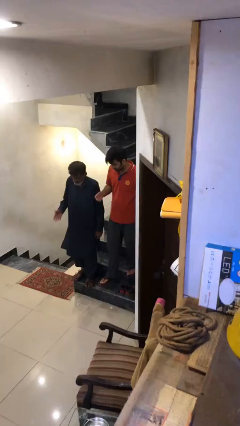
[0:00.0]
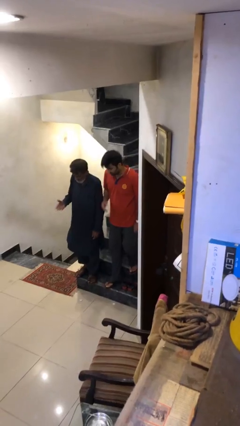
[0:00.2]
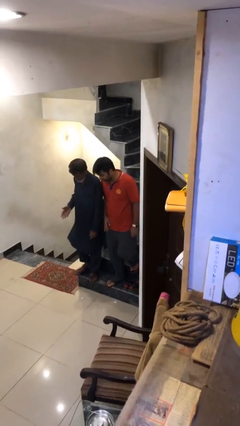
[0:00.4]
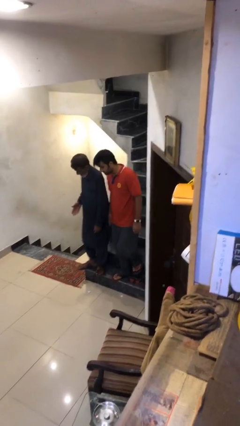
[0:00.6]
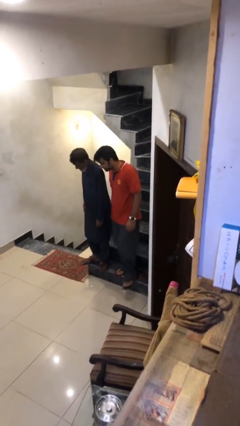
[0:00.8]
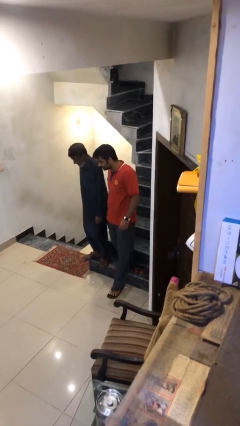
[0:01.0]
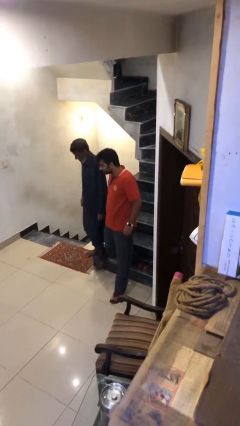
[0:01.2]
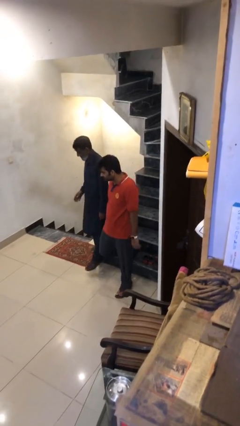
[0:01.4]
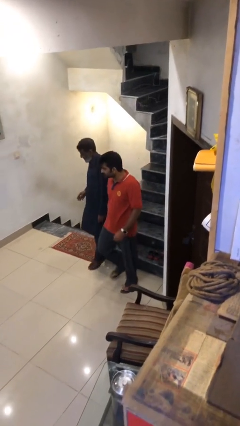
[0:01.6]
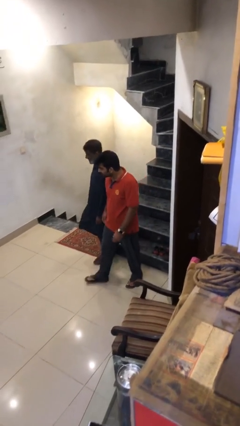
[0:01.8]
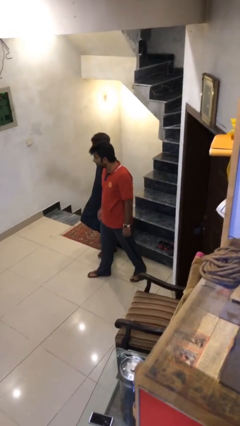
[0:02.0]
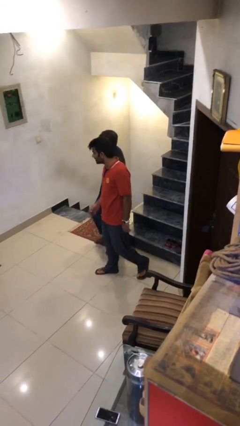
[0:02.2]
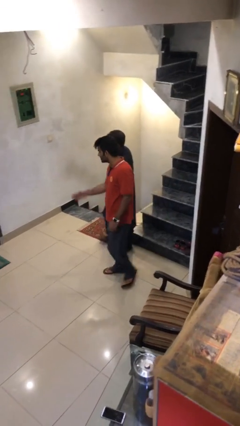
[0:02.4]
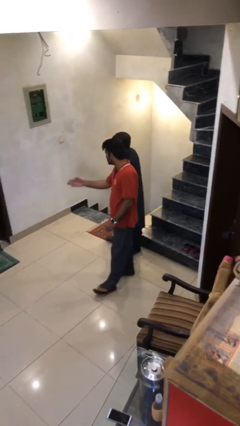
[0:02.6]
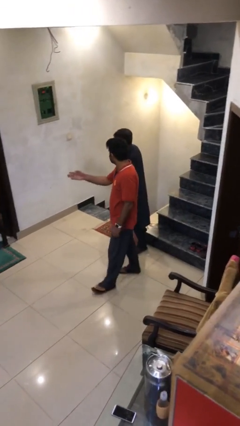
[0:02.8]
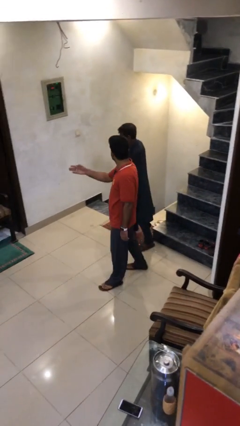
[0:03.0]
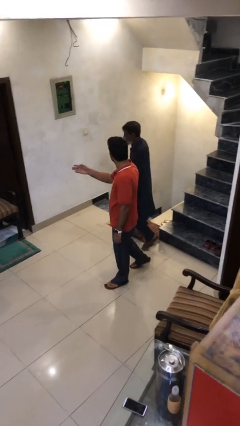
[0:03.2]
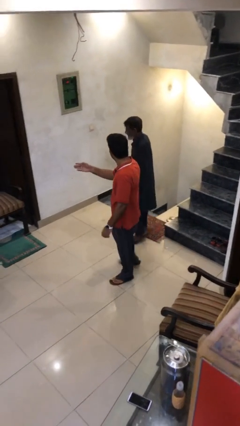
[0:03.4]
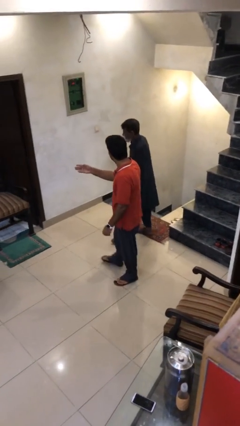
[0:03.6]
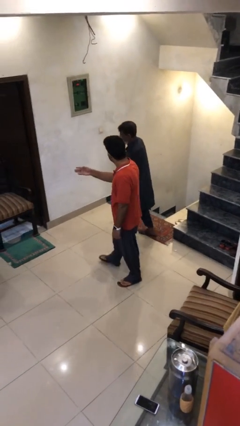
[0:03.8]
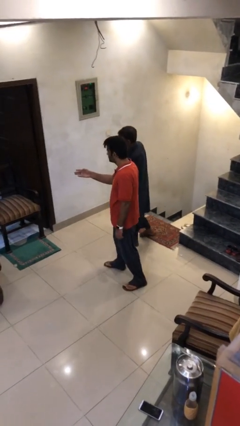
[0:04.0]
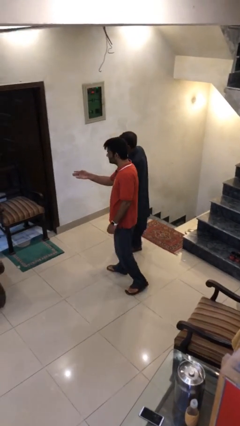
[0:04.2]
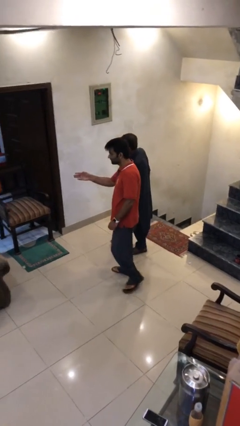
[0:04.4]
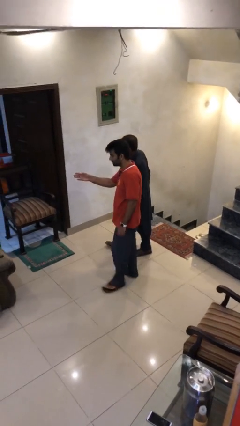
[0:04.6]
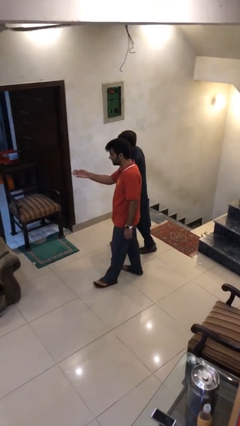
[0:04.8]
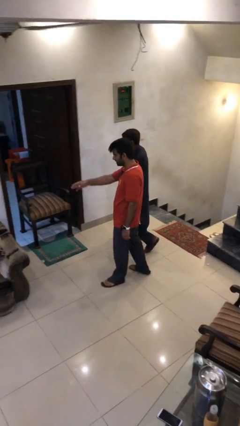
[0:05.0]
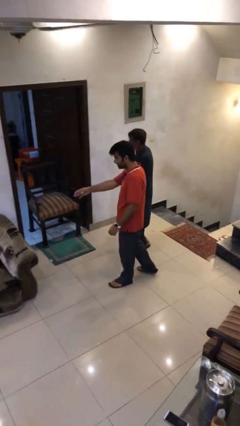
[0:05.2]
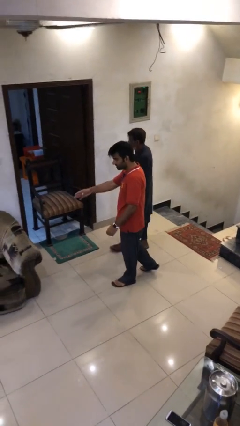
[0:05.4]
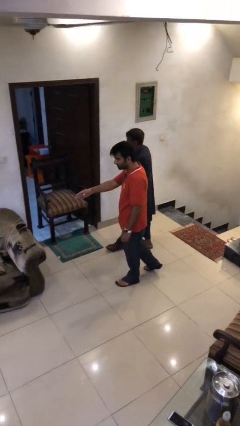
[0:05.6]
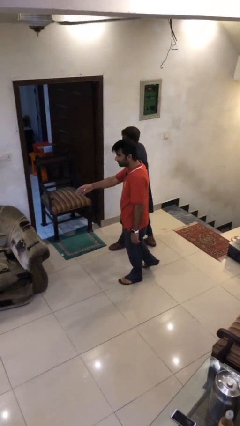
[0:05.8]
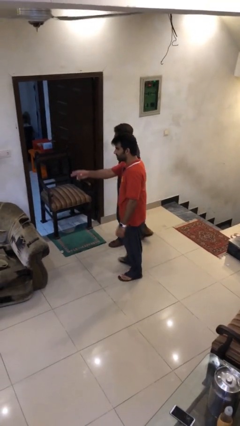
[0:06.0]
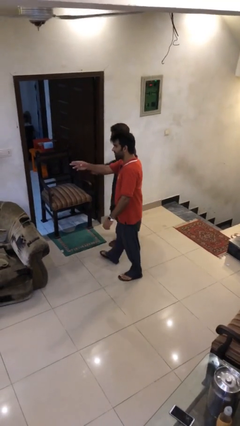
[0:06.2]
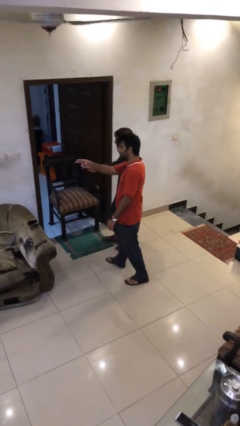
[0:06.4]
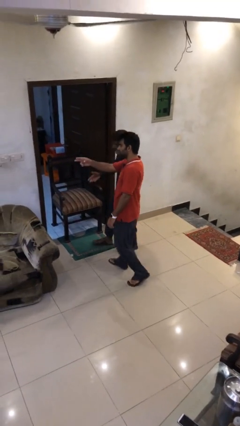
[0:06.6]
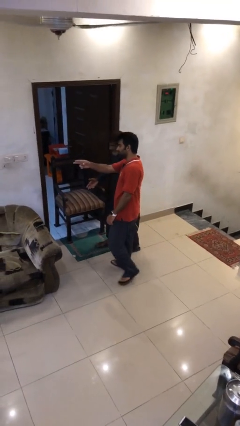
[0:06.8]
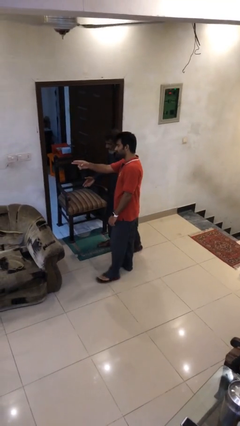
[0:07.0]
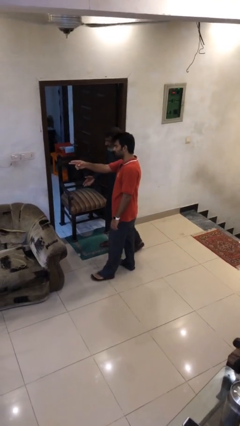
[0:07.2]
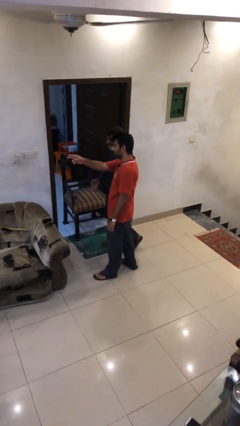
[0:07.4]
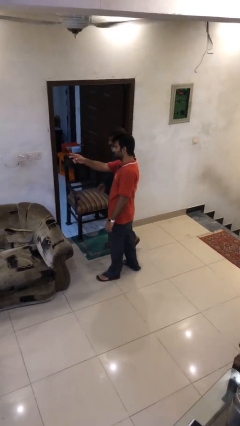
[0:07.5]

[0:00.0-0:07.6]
person talks to person

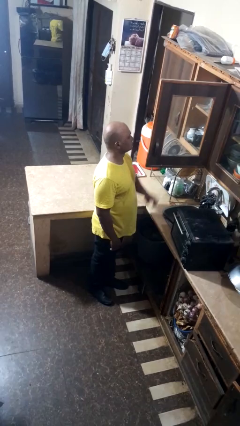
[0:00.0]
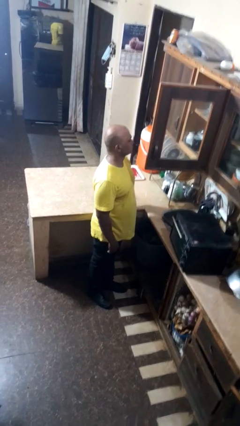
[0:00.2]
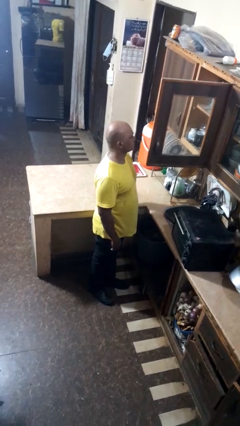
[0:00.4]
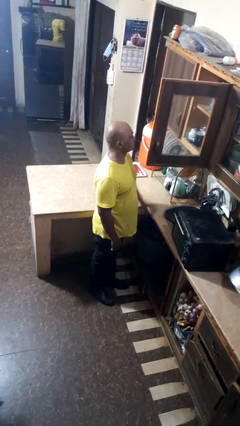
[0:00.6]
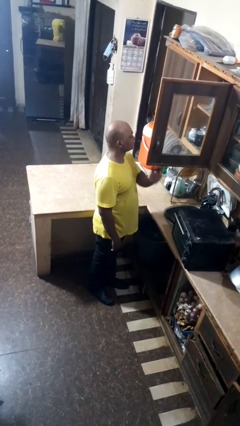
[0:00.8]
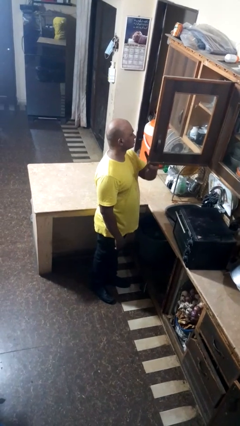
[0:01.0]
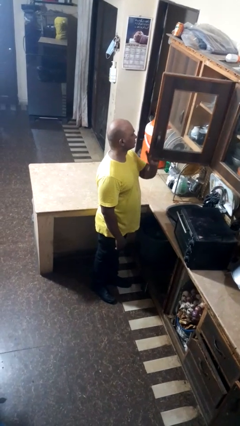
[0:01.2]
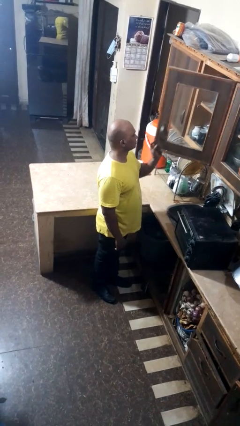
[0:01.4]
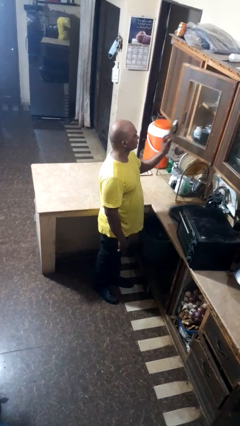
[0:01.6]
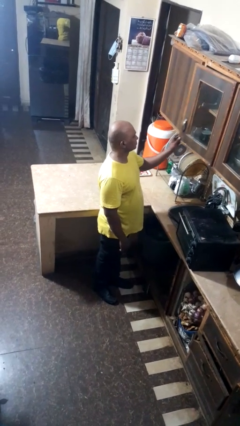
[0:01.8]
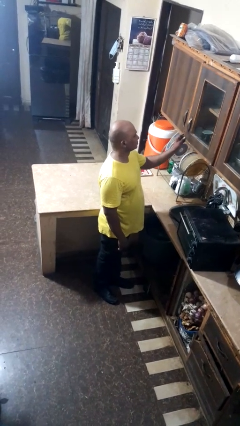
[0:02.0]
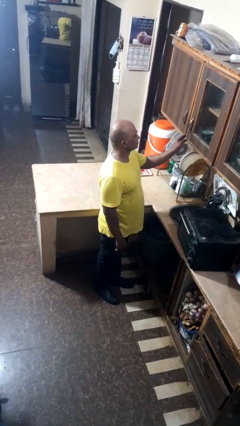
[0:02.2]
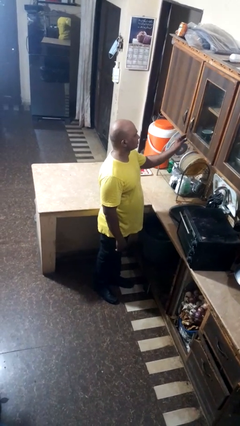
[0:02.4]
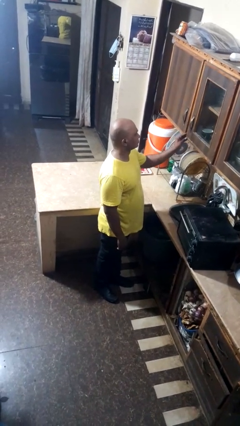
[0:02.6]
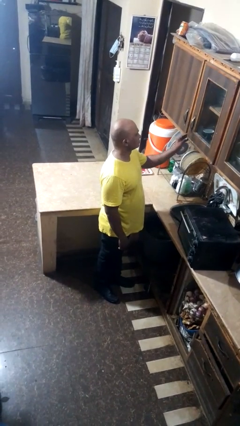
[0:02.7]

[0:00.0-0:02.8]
person closes cabinet

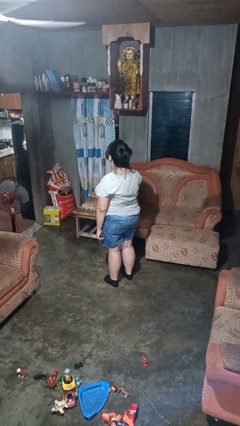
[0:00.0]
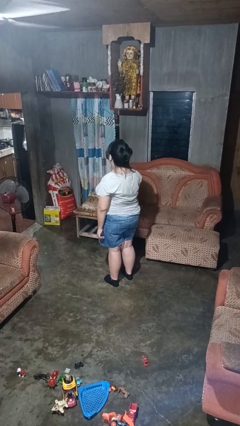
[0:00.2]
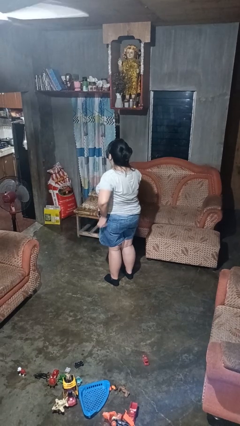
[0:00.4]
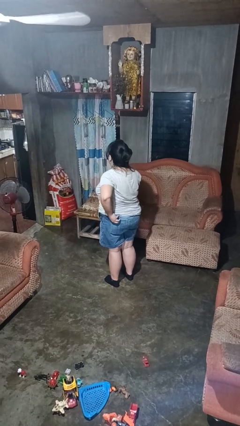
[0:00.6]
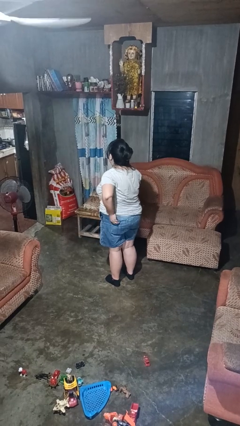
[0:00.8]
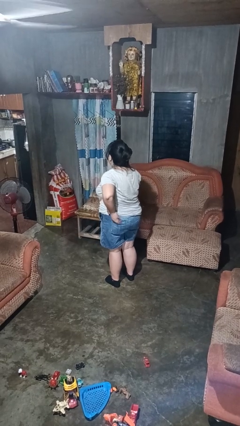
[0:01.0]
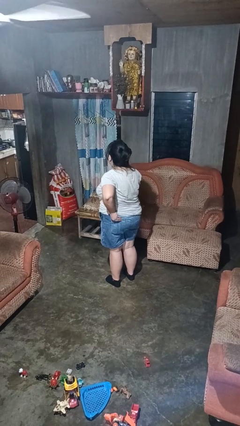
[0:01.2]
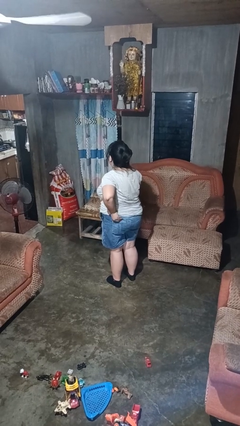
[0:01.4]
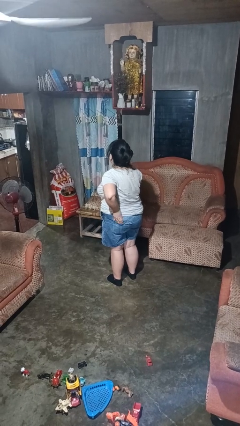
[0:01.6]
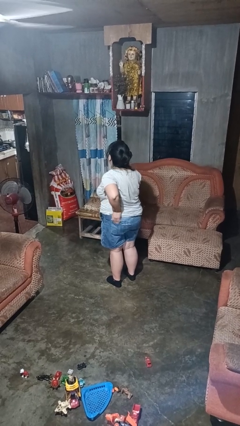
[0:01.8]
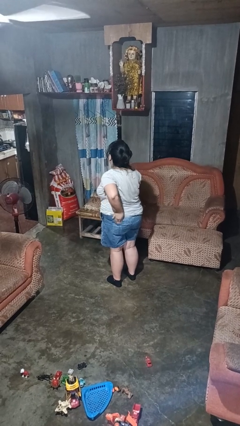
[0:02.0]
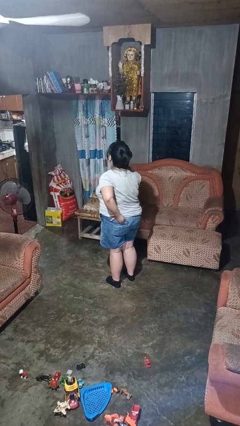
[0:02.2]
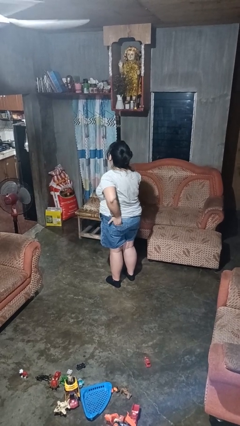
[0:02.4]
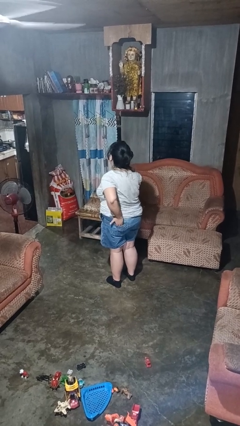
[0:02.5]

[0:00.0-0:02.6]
person puts hands in back pockets

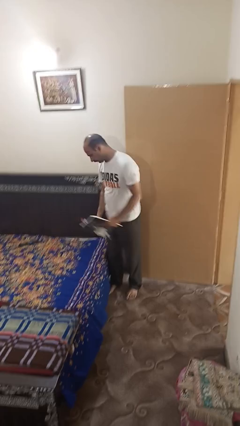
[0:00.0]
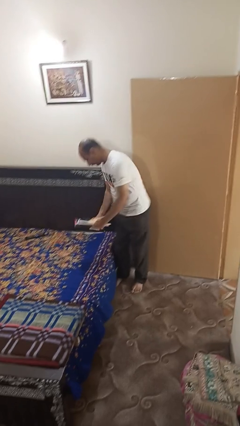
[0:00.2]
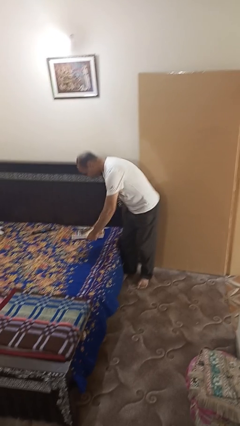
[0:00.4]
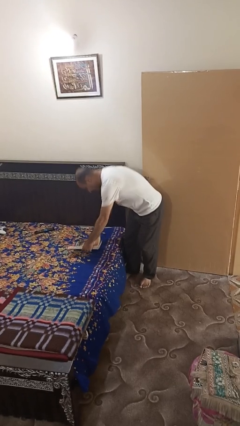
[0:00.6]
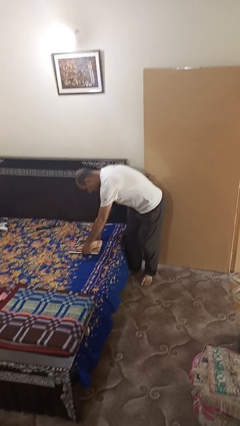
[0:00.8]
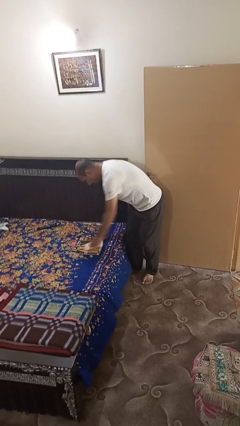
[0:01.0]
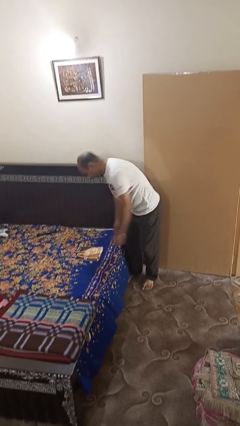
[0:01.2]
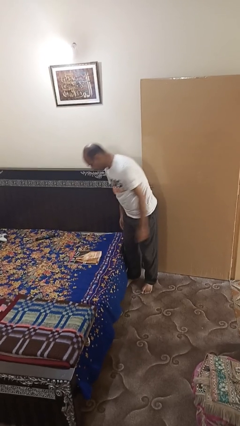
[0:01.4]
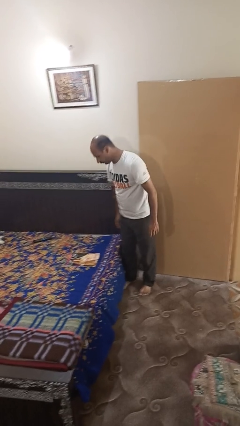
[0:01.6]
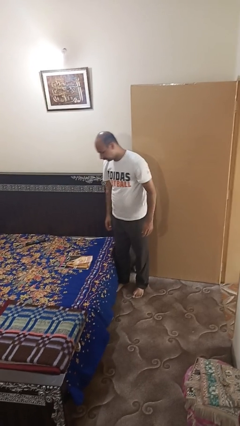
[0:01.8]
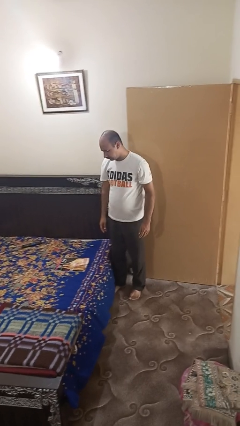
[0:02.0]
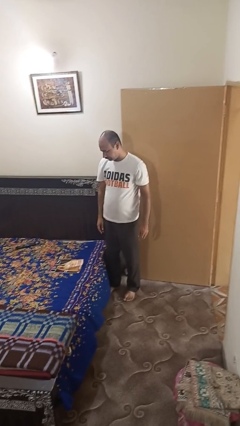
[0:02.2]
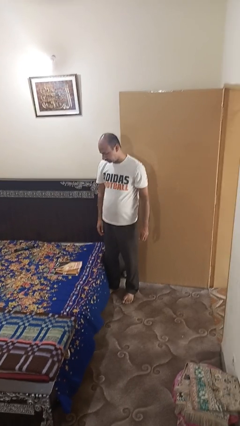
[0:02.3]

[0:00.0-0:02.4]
person puts down object on bed

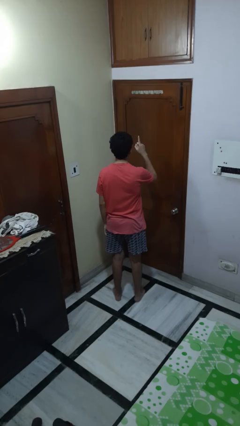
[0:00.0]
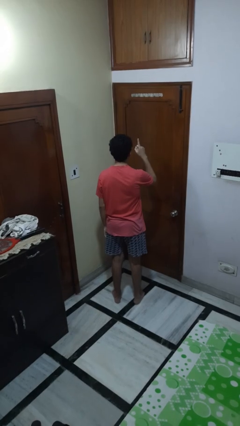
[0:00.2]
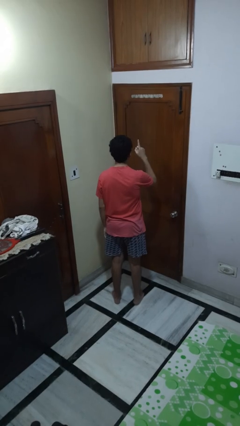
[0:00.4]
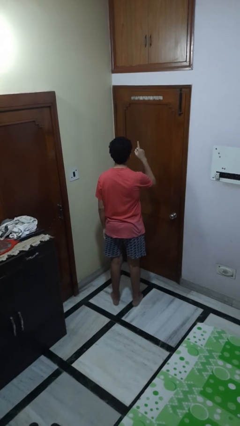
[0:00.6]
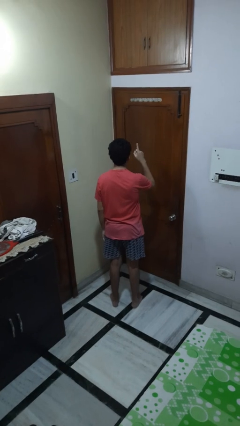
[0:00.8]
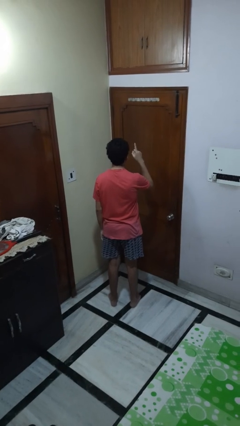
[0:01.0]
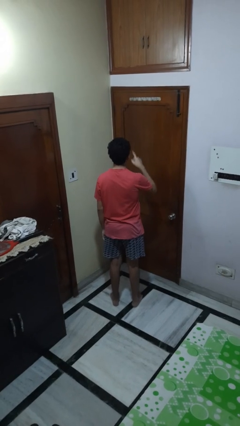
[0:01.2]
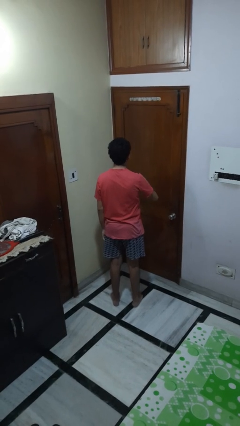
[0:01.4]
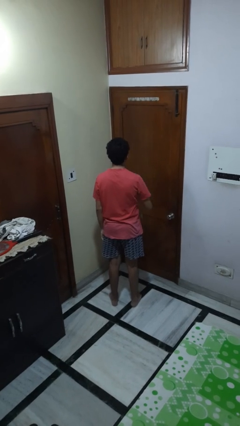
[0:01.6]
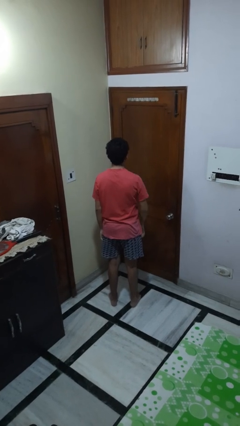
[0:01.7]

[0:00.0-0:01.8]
person gestures number one

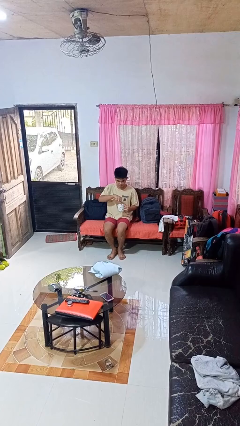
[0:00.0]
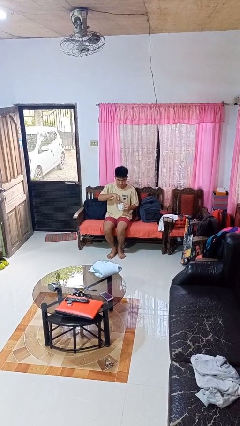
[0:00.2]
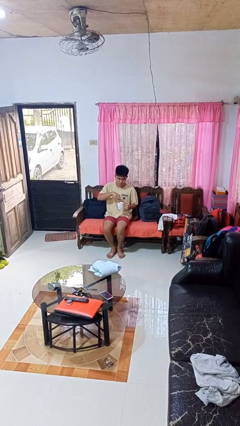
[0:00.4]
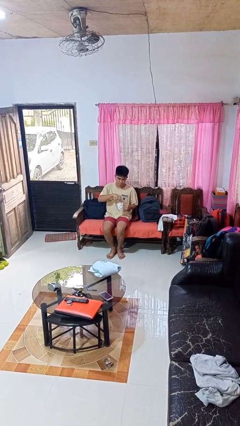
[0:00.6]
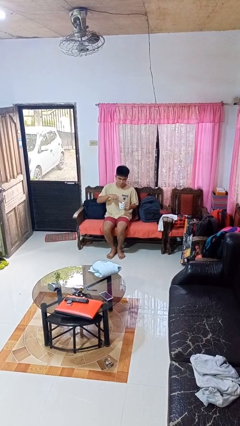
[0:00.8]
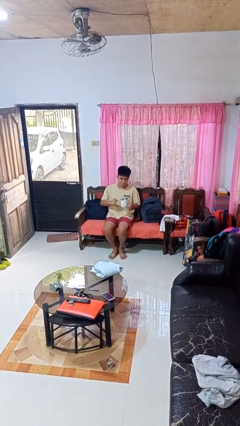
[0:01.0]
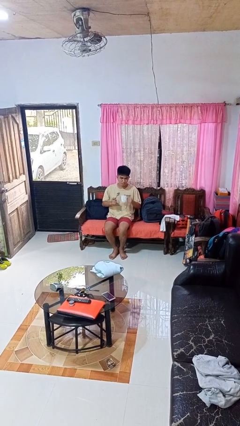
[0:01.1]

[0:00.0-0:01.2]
person stirs mug
